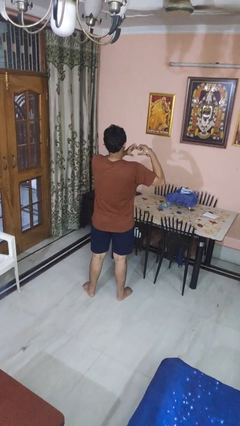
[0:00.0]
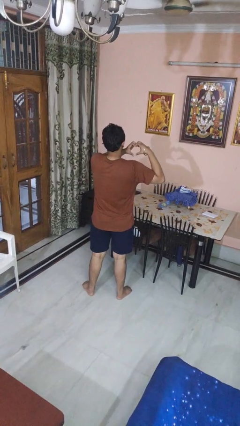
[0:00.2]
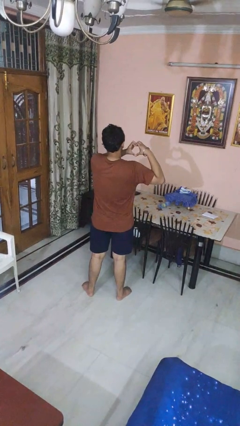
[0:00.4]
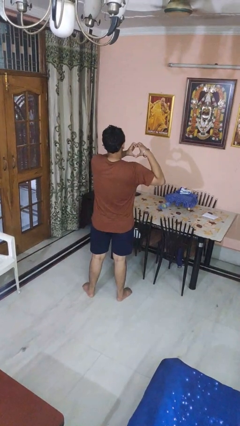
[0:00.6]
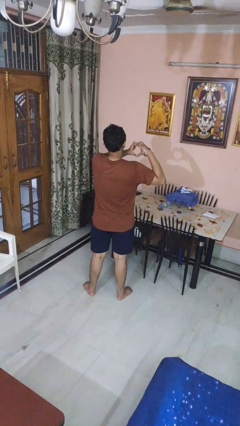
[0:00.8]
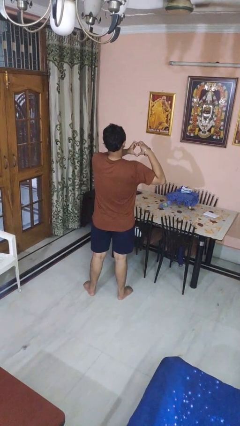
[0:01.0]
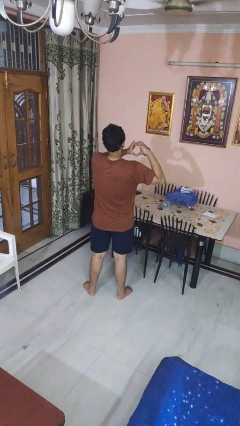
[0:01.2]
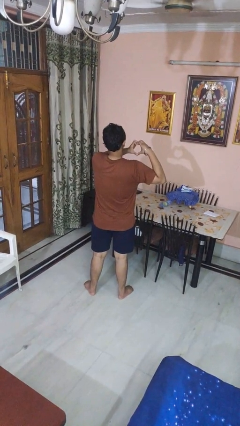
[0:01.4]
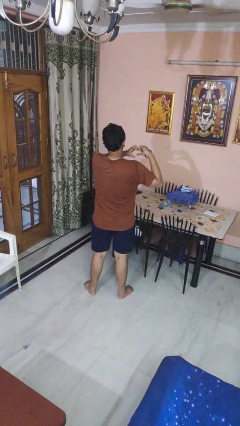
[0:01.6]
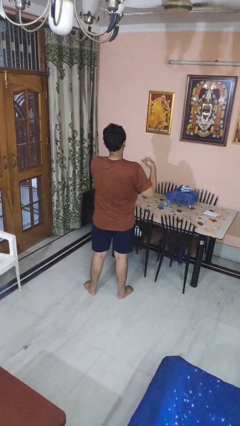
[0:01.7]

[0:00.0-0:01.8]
person gestures heart

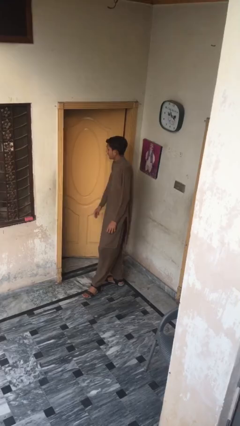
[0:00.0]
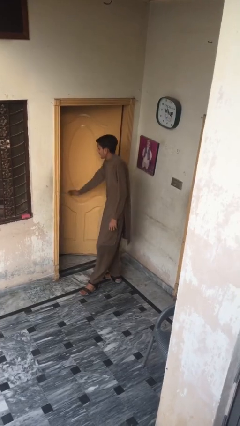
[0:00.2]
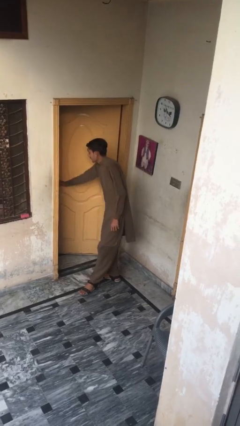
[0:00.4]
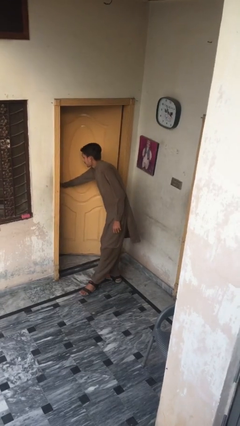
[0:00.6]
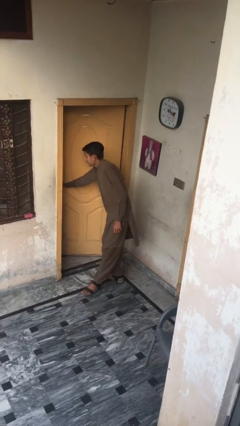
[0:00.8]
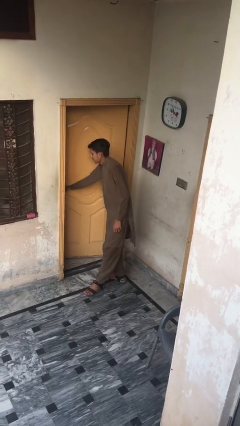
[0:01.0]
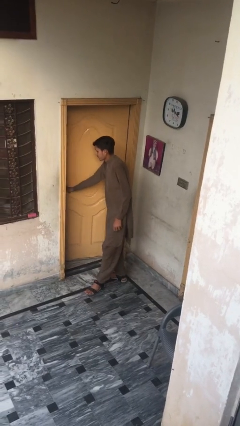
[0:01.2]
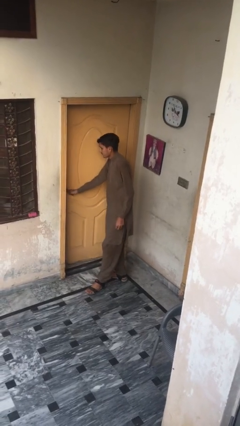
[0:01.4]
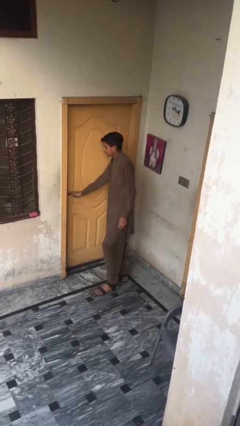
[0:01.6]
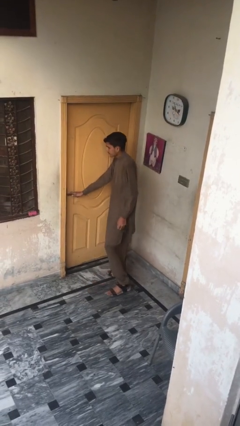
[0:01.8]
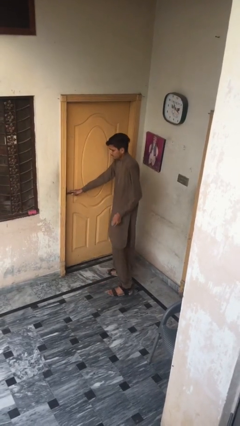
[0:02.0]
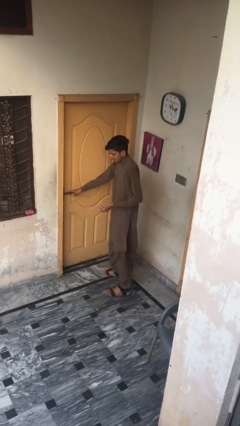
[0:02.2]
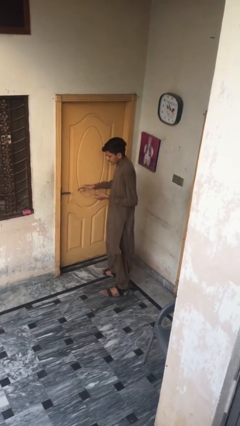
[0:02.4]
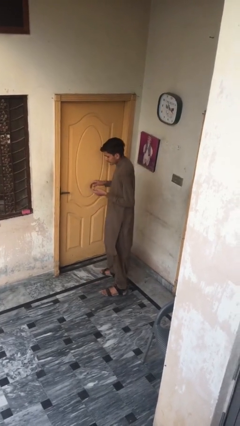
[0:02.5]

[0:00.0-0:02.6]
person closes facility door

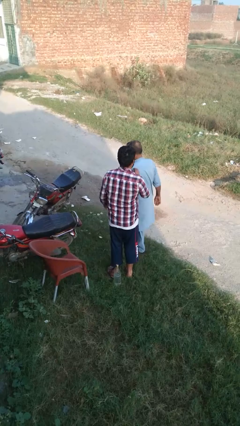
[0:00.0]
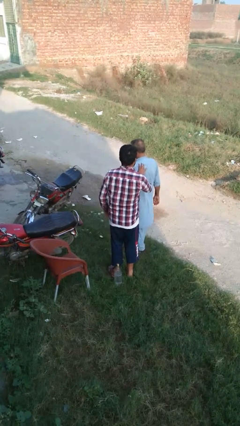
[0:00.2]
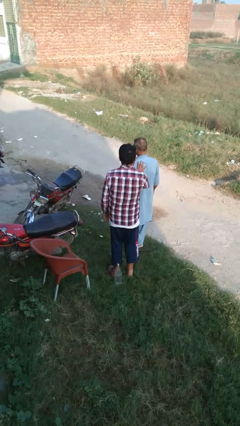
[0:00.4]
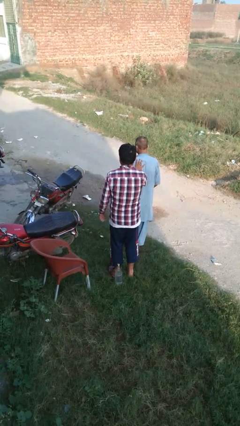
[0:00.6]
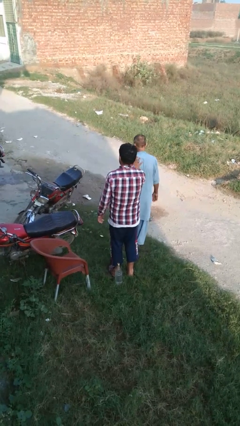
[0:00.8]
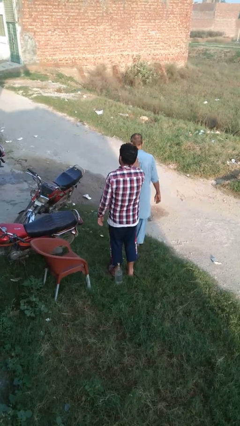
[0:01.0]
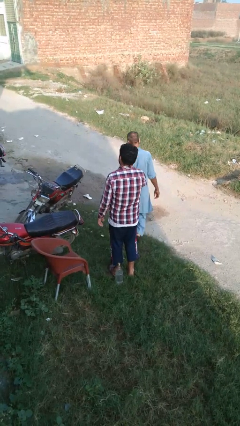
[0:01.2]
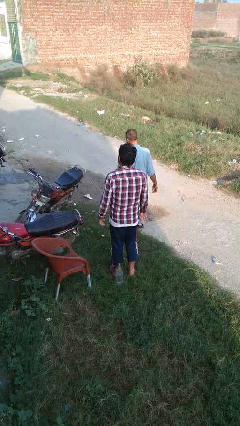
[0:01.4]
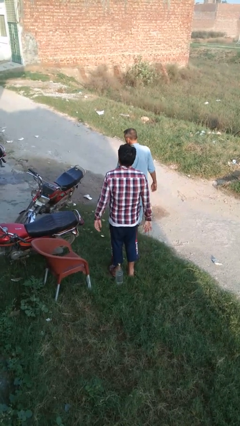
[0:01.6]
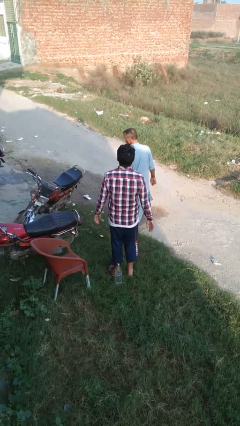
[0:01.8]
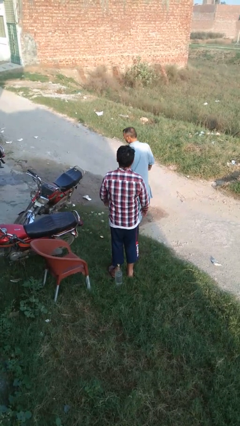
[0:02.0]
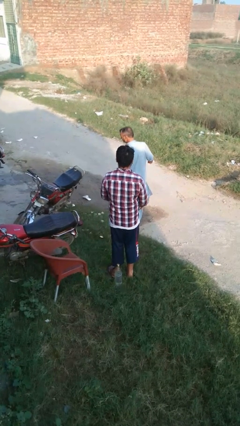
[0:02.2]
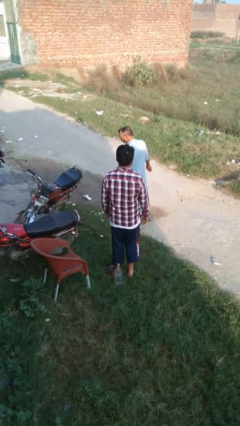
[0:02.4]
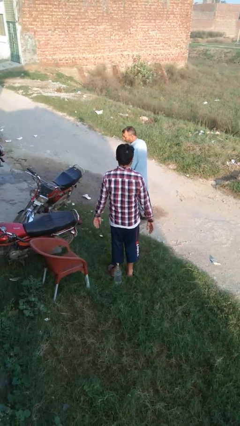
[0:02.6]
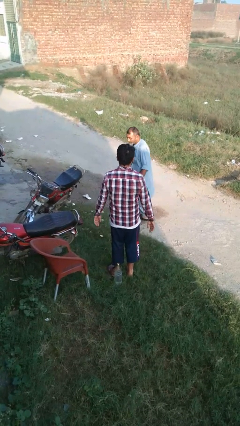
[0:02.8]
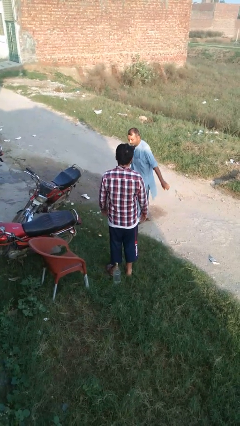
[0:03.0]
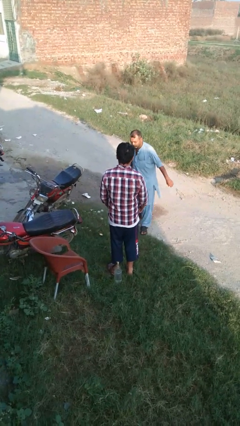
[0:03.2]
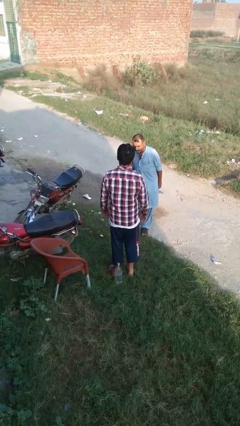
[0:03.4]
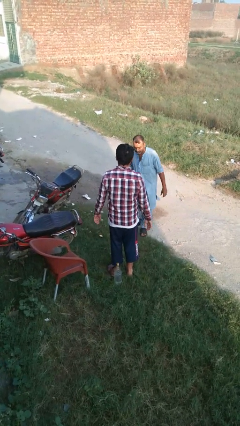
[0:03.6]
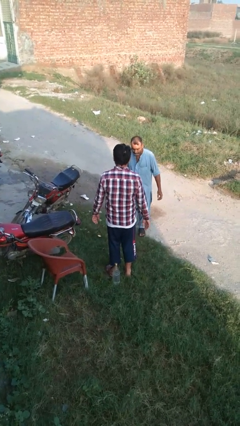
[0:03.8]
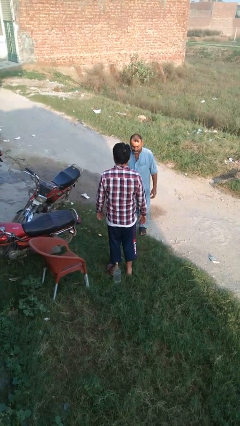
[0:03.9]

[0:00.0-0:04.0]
person spins person around

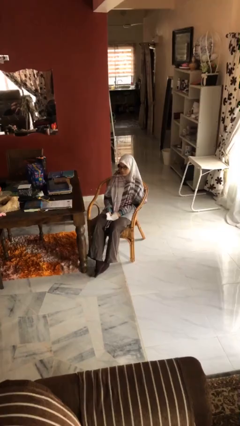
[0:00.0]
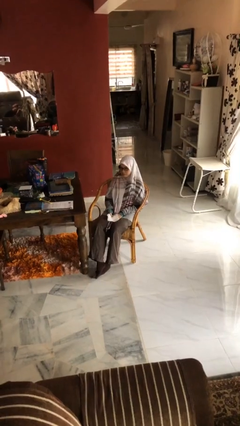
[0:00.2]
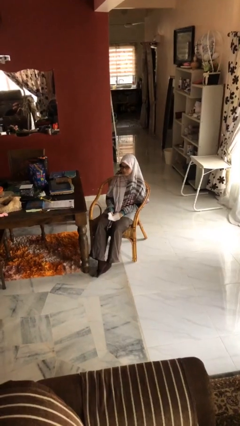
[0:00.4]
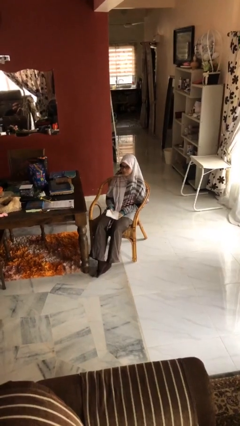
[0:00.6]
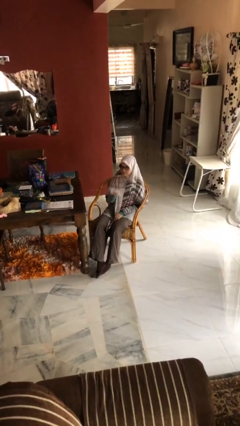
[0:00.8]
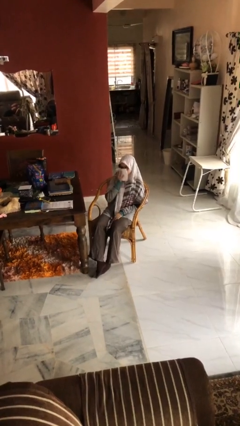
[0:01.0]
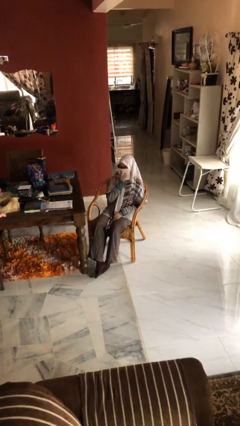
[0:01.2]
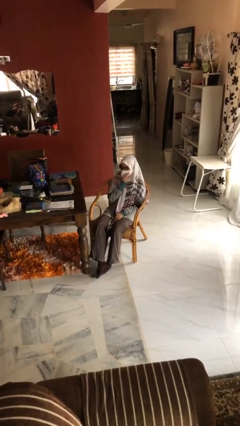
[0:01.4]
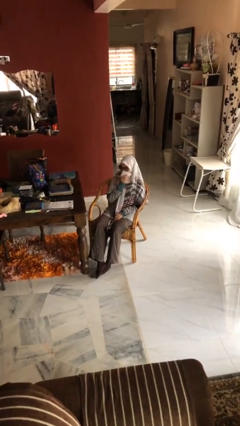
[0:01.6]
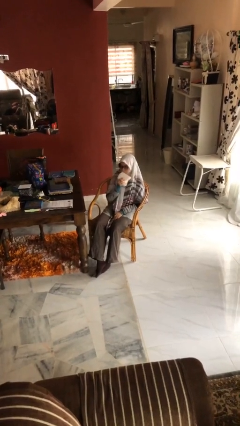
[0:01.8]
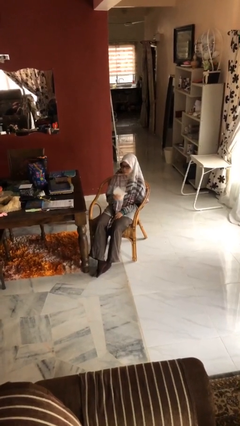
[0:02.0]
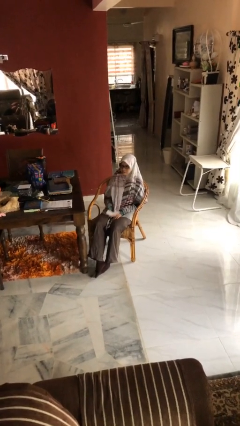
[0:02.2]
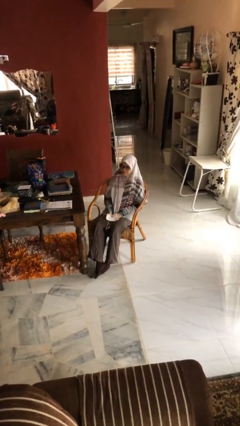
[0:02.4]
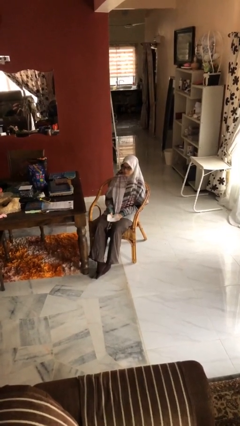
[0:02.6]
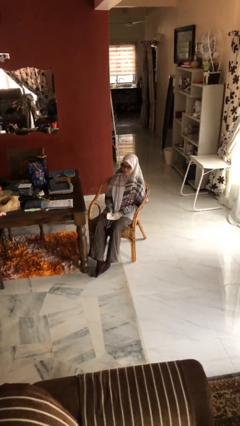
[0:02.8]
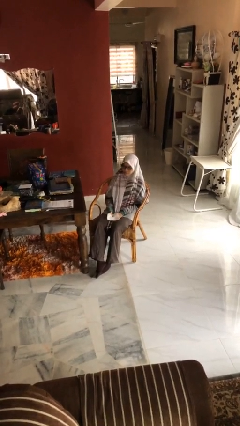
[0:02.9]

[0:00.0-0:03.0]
person wipes mouth with napkin

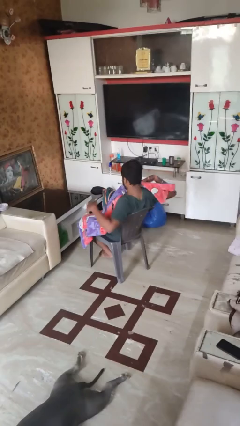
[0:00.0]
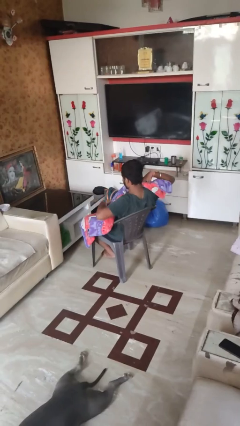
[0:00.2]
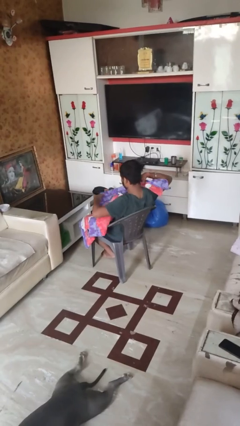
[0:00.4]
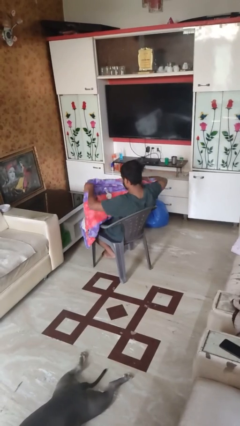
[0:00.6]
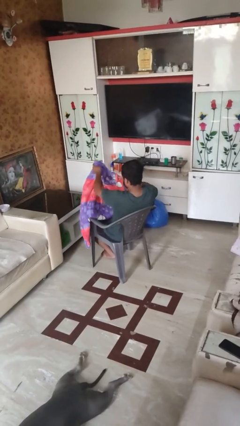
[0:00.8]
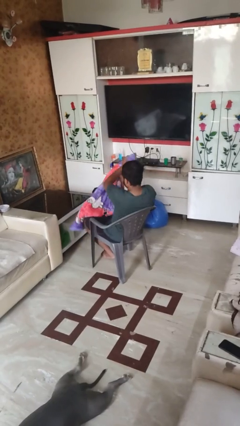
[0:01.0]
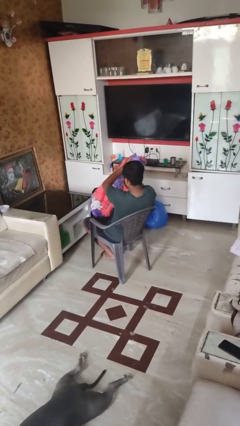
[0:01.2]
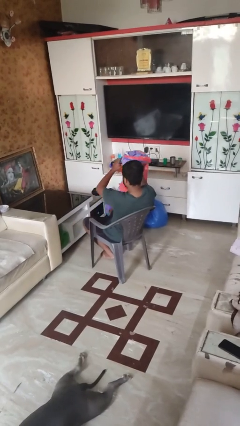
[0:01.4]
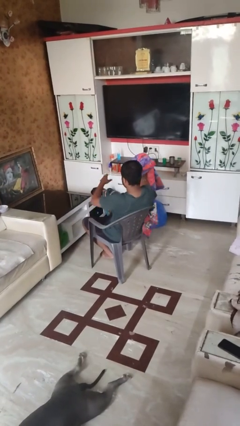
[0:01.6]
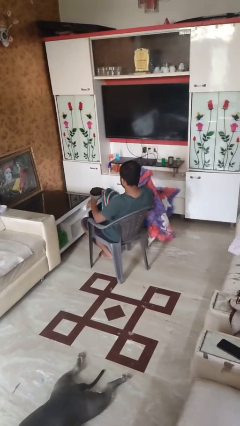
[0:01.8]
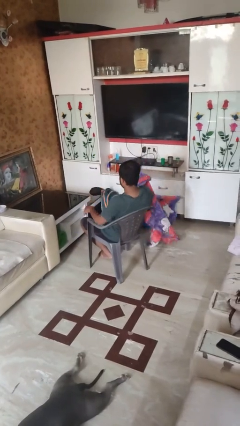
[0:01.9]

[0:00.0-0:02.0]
person uncovers with blanket

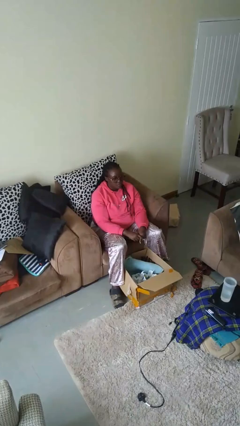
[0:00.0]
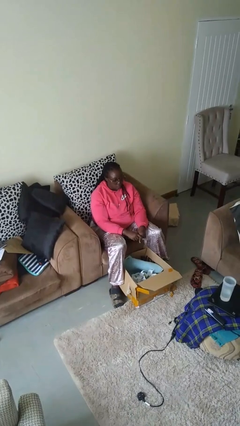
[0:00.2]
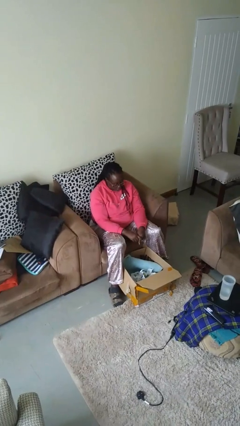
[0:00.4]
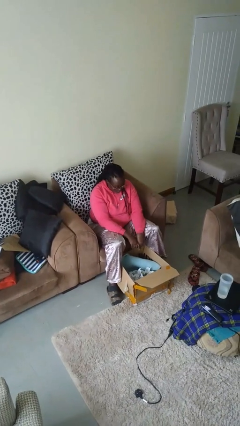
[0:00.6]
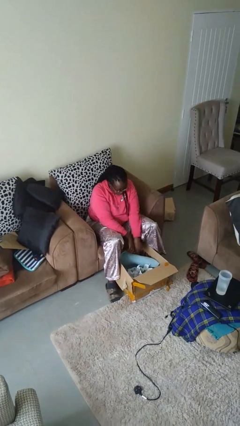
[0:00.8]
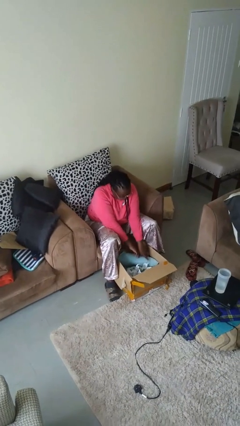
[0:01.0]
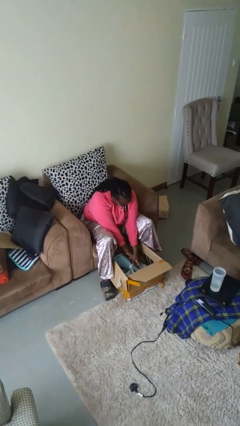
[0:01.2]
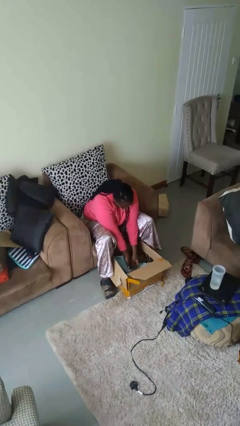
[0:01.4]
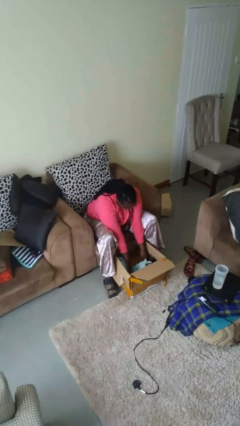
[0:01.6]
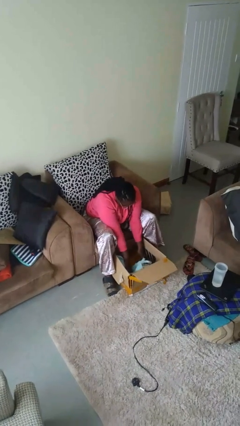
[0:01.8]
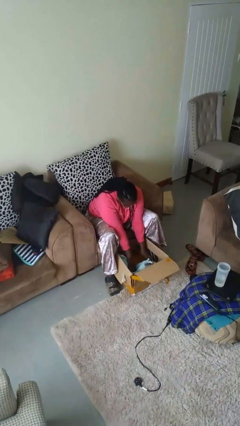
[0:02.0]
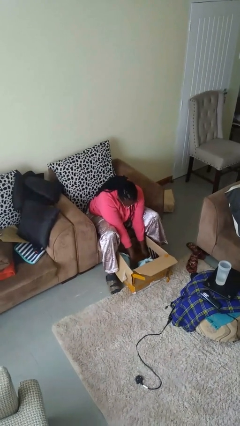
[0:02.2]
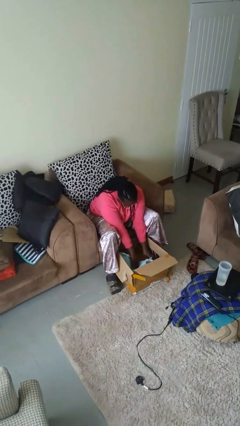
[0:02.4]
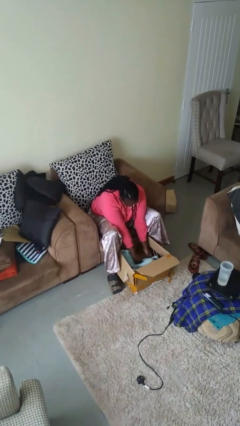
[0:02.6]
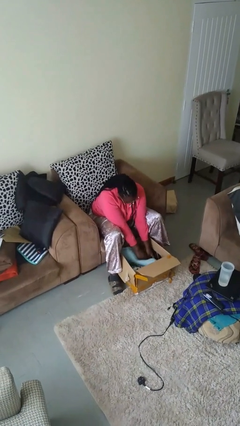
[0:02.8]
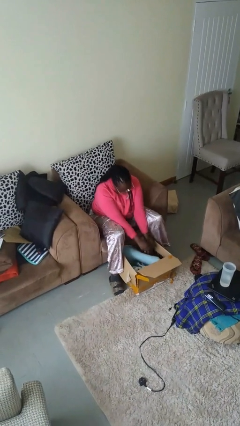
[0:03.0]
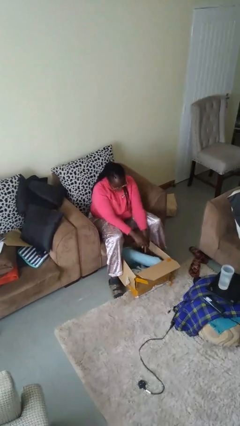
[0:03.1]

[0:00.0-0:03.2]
person searches in box

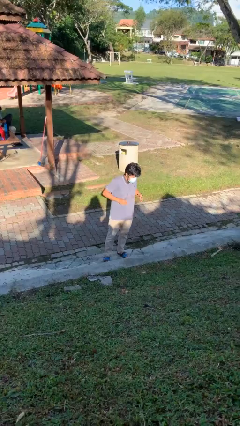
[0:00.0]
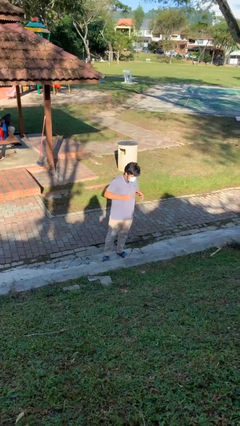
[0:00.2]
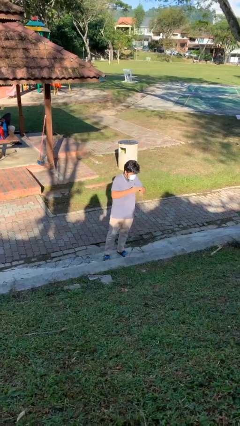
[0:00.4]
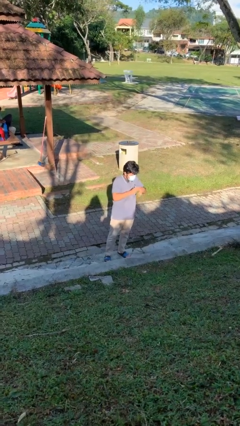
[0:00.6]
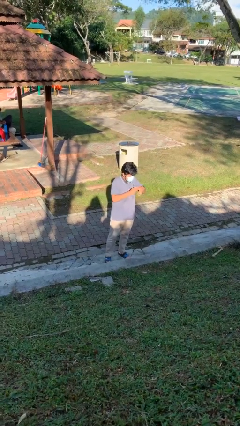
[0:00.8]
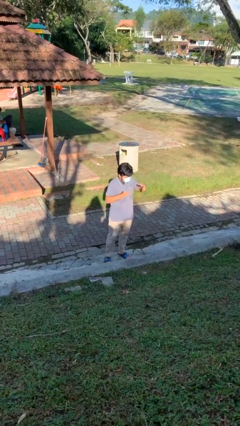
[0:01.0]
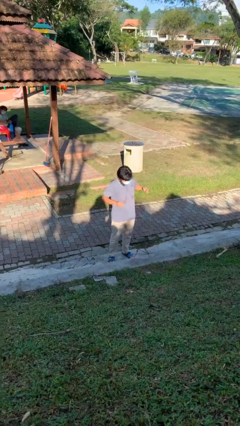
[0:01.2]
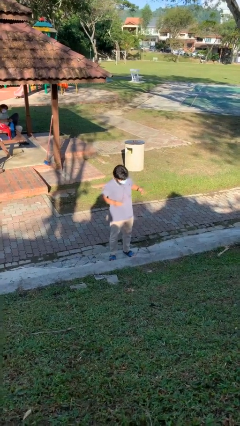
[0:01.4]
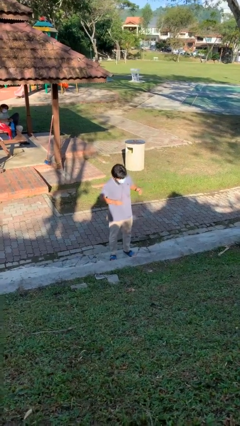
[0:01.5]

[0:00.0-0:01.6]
person takes off ring
